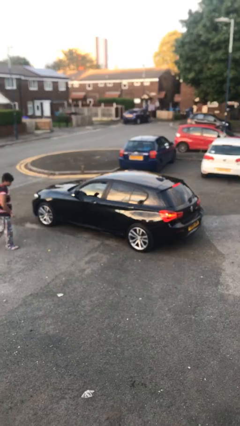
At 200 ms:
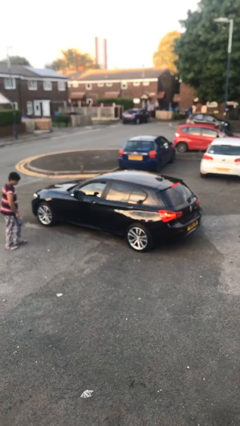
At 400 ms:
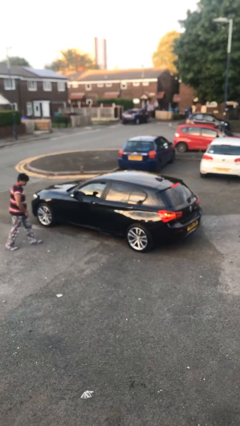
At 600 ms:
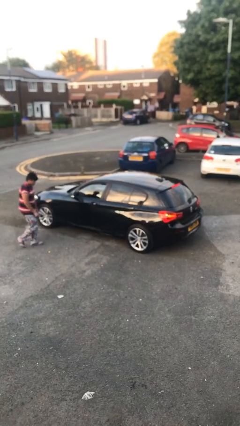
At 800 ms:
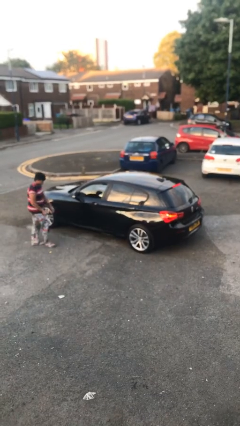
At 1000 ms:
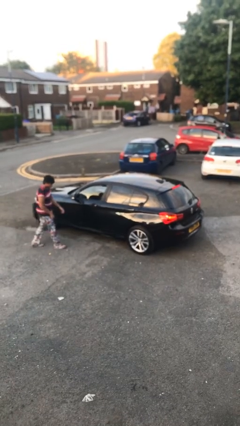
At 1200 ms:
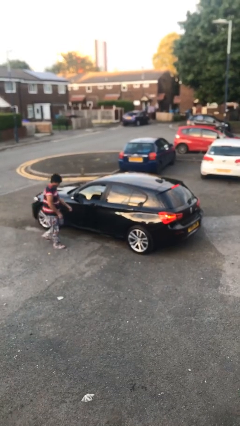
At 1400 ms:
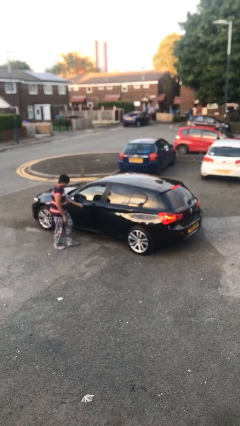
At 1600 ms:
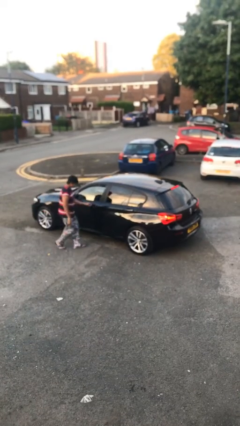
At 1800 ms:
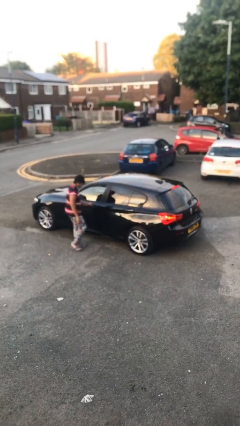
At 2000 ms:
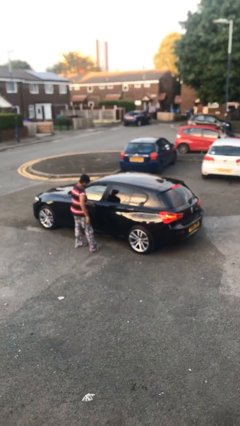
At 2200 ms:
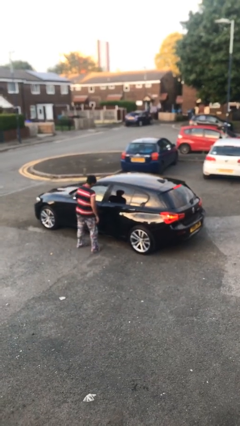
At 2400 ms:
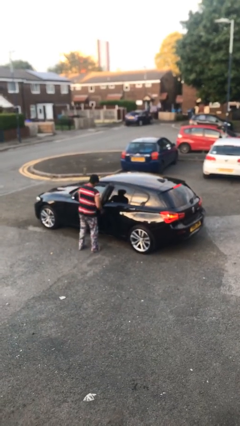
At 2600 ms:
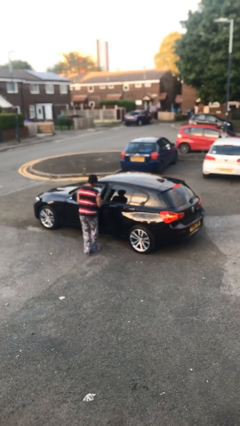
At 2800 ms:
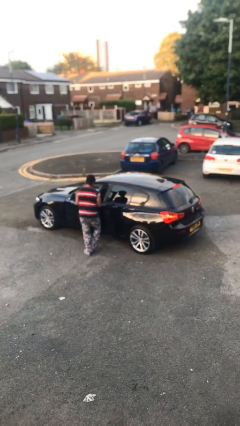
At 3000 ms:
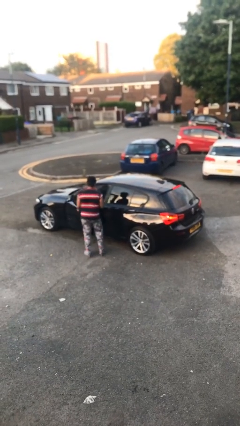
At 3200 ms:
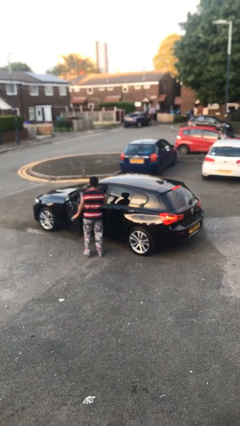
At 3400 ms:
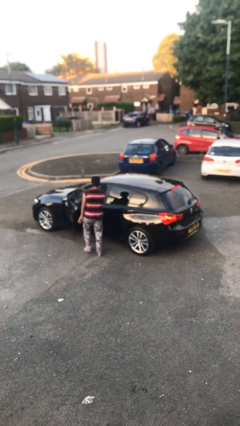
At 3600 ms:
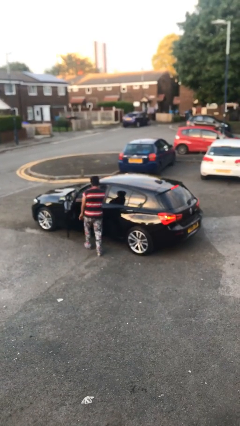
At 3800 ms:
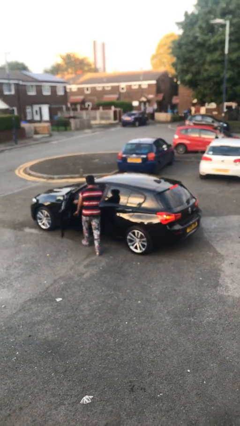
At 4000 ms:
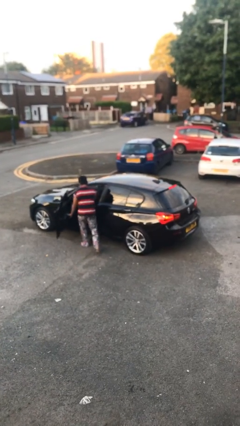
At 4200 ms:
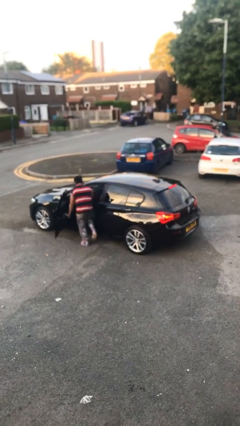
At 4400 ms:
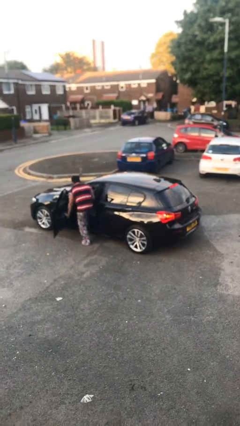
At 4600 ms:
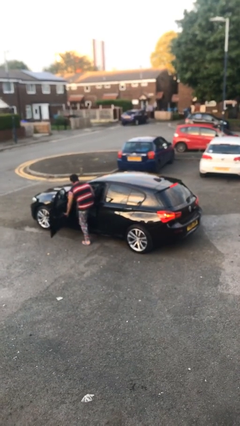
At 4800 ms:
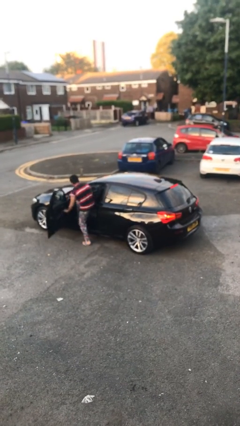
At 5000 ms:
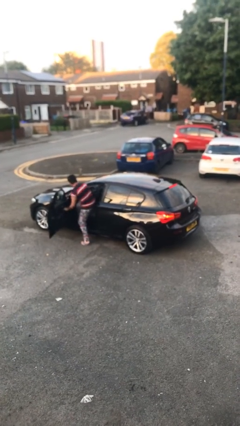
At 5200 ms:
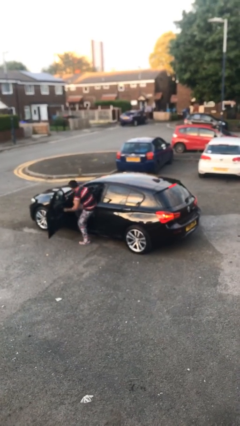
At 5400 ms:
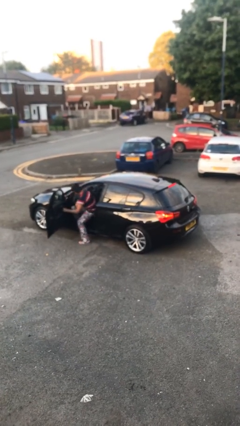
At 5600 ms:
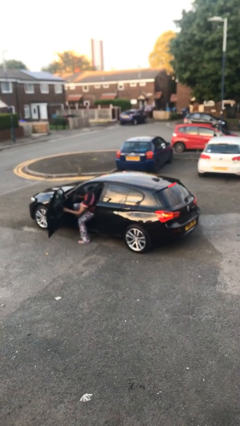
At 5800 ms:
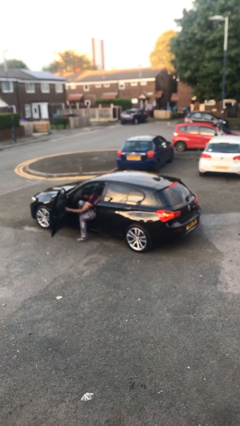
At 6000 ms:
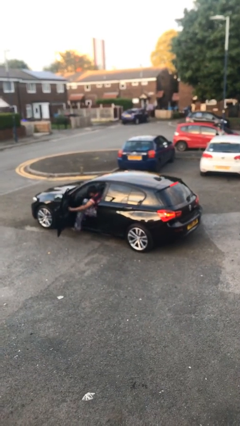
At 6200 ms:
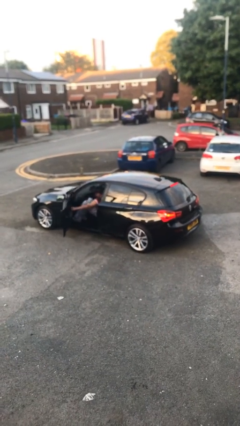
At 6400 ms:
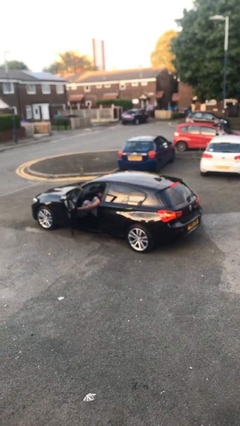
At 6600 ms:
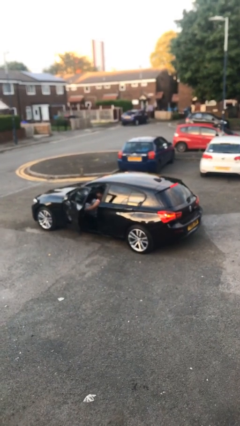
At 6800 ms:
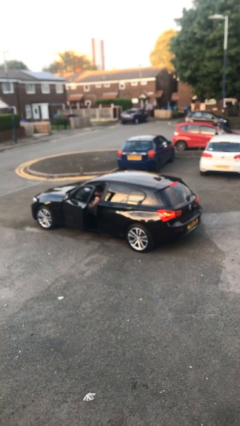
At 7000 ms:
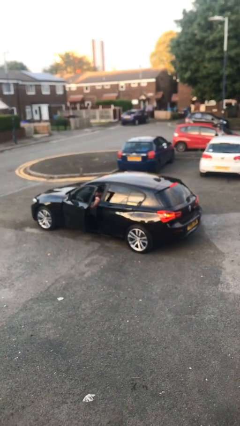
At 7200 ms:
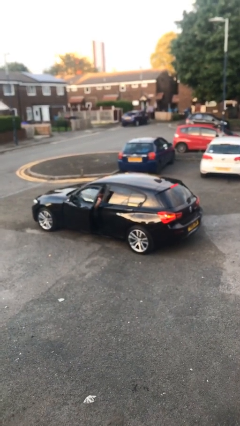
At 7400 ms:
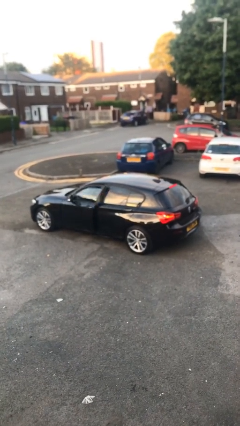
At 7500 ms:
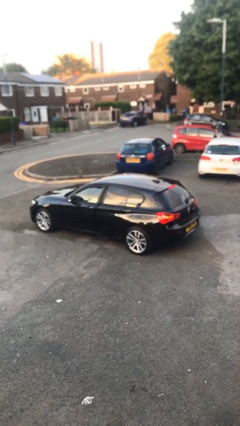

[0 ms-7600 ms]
car picks up person

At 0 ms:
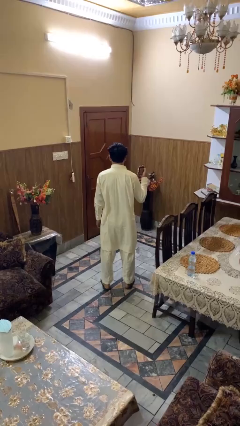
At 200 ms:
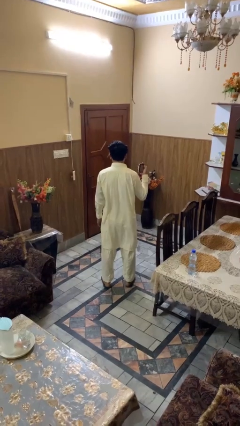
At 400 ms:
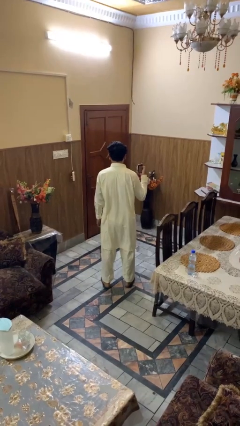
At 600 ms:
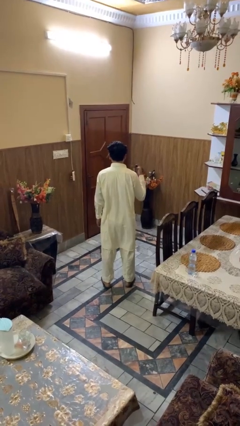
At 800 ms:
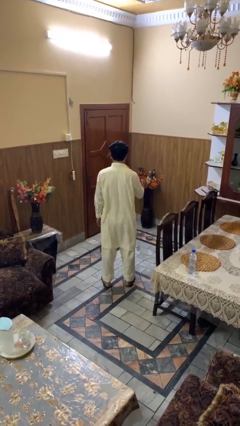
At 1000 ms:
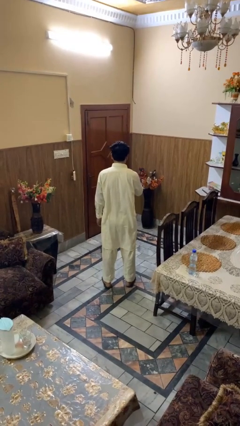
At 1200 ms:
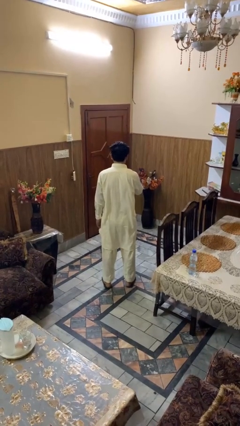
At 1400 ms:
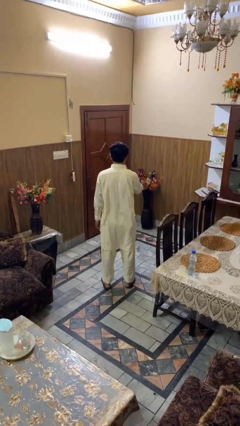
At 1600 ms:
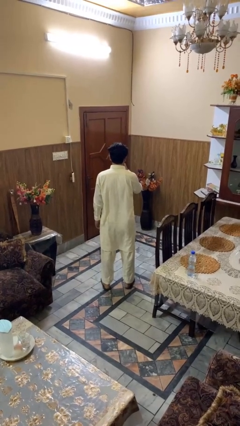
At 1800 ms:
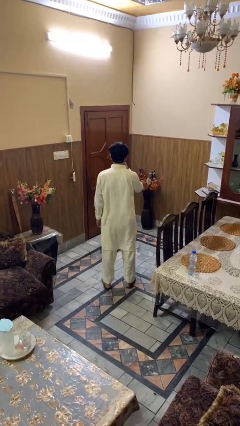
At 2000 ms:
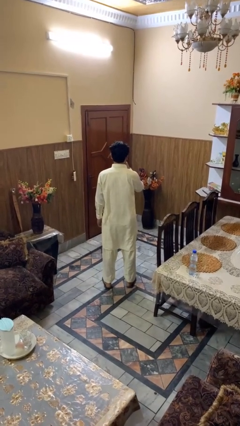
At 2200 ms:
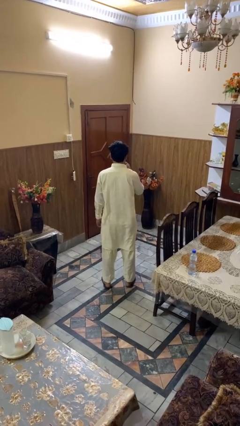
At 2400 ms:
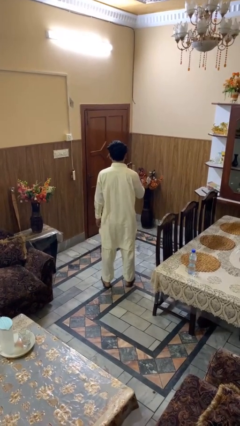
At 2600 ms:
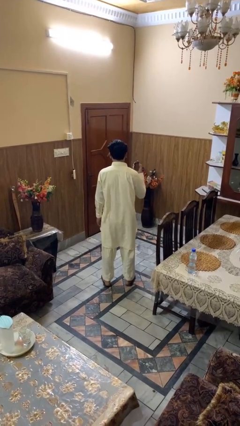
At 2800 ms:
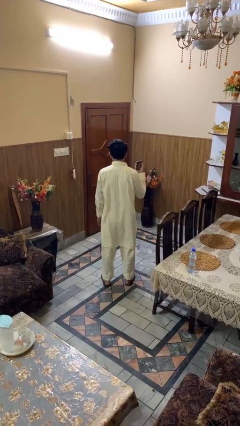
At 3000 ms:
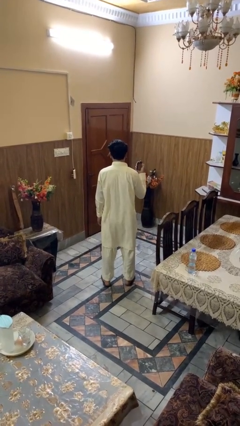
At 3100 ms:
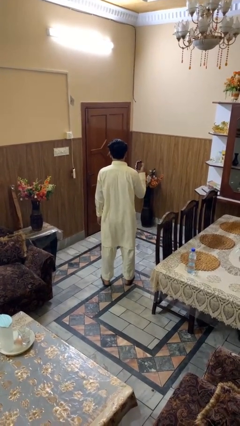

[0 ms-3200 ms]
person vapes

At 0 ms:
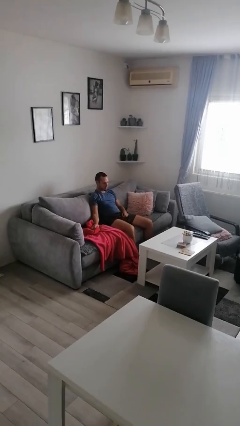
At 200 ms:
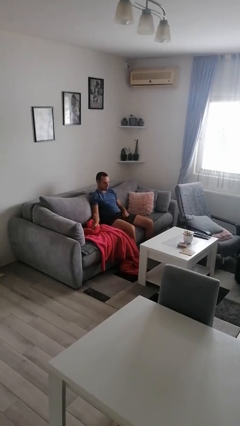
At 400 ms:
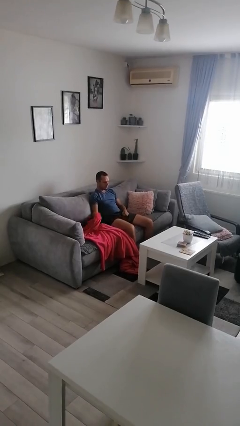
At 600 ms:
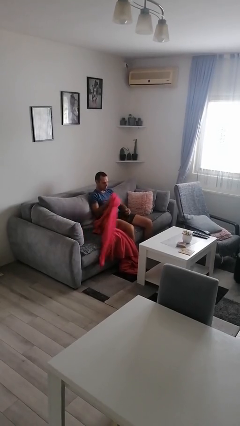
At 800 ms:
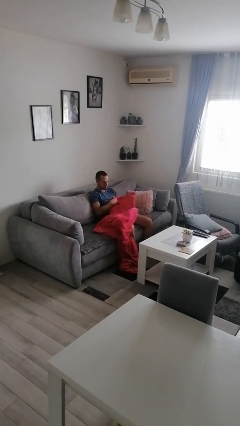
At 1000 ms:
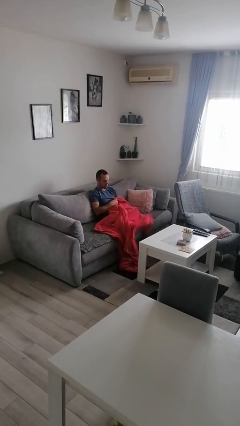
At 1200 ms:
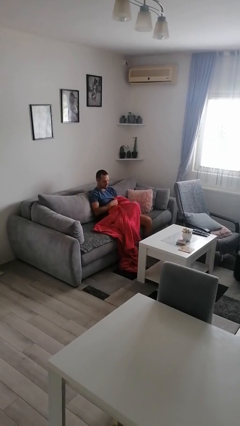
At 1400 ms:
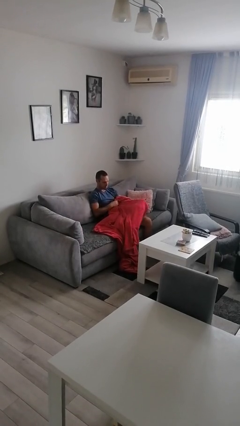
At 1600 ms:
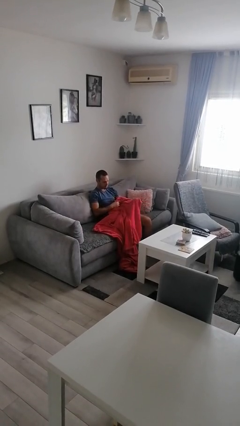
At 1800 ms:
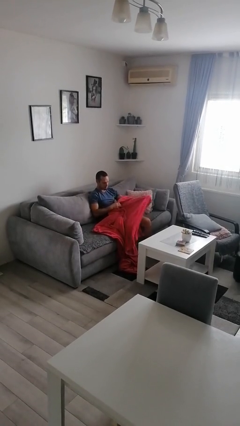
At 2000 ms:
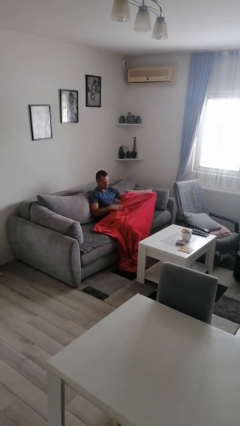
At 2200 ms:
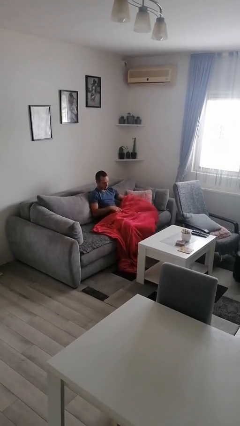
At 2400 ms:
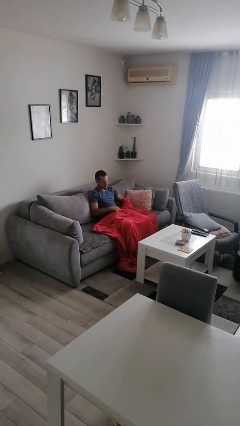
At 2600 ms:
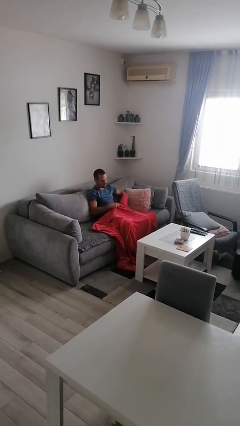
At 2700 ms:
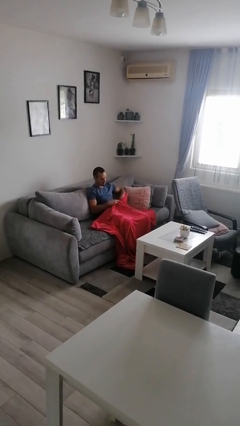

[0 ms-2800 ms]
person covers with blanket

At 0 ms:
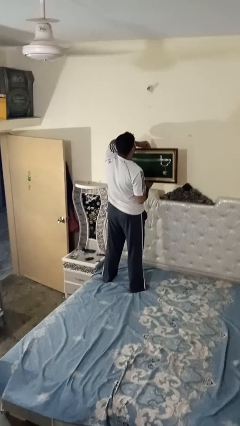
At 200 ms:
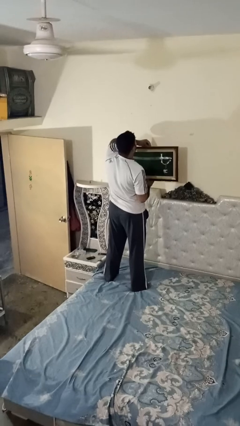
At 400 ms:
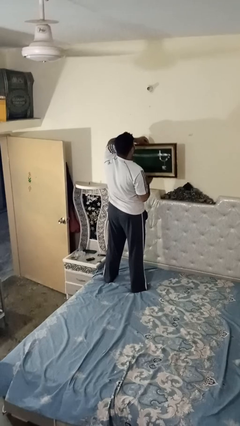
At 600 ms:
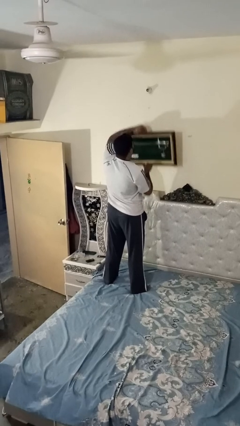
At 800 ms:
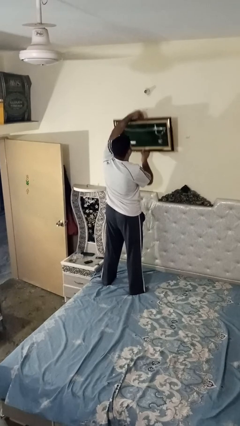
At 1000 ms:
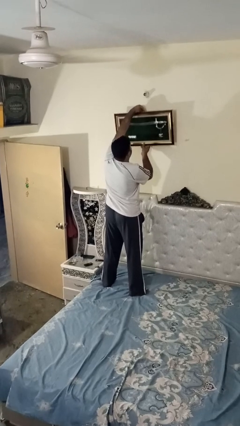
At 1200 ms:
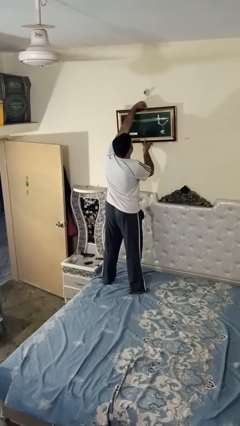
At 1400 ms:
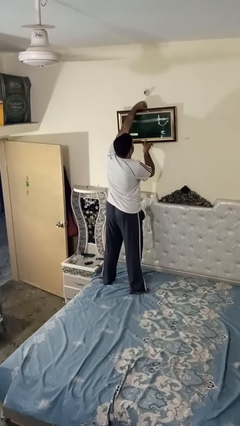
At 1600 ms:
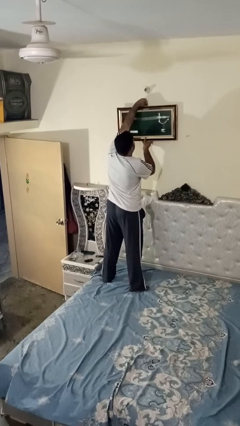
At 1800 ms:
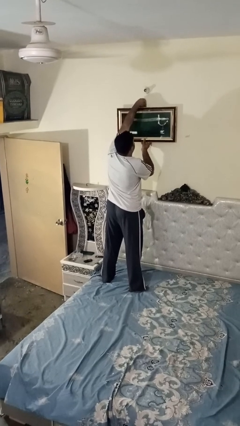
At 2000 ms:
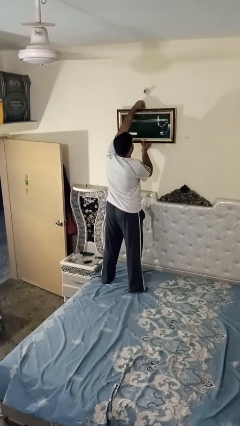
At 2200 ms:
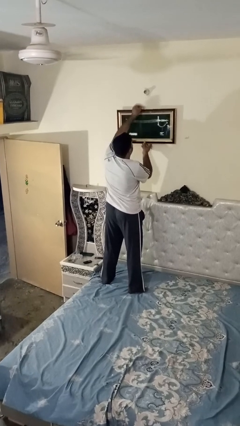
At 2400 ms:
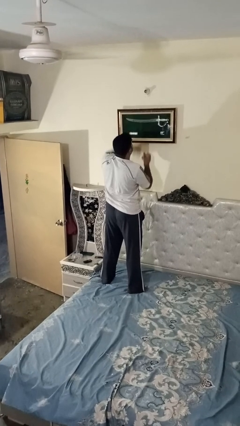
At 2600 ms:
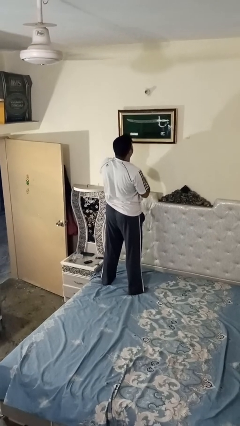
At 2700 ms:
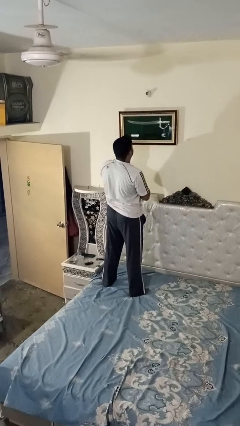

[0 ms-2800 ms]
person puts up picture frame

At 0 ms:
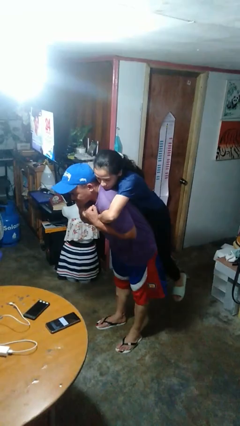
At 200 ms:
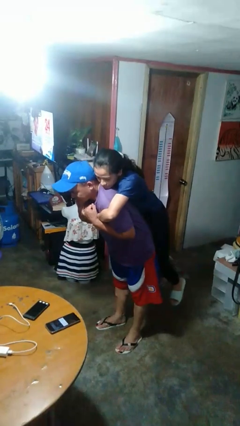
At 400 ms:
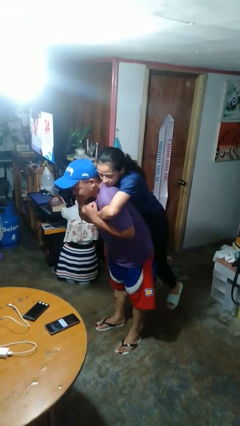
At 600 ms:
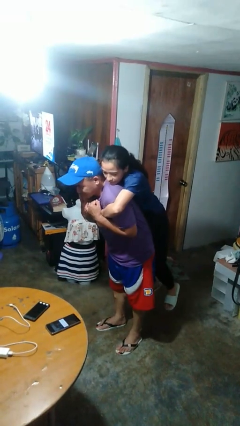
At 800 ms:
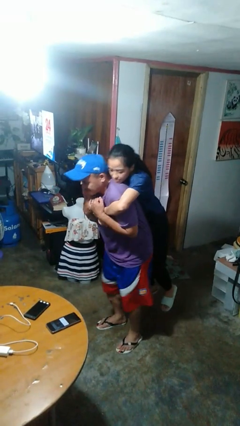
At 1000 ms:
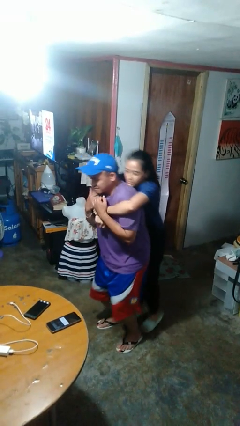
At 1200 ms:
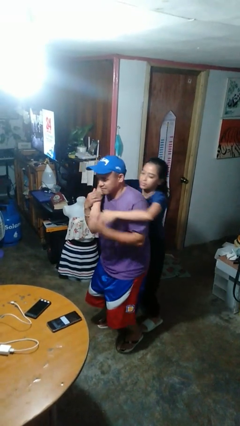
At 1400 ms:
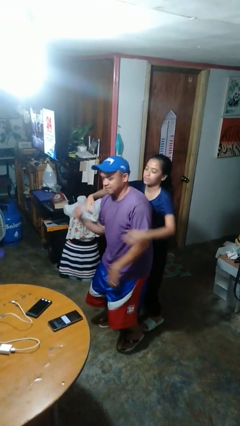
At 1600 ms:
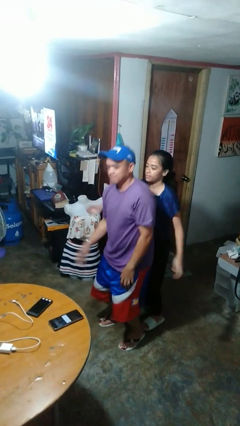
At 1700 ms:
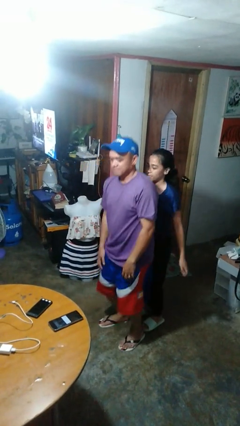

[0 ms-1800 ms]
person puts down person
